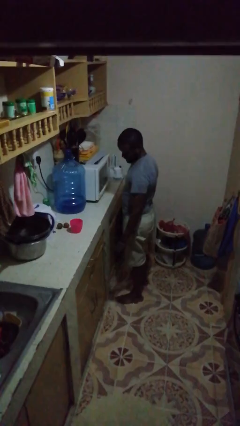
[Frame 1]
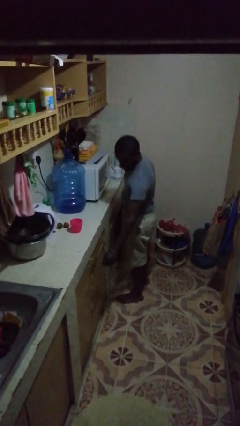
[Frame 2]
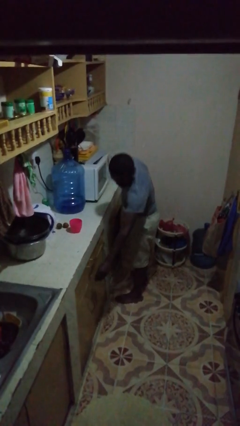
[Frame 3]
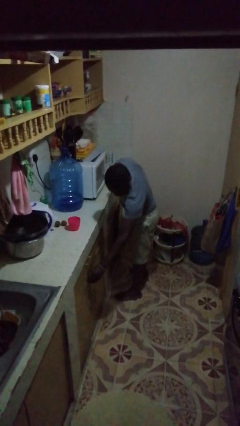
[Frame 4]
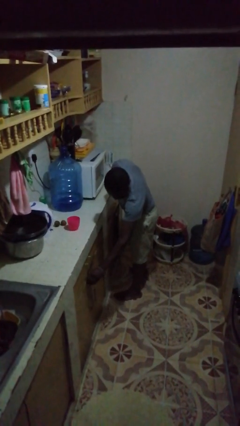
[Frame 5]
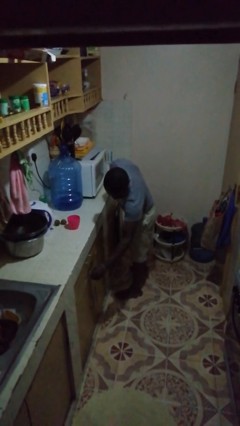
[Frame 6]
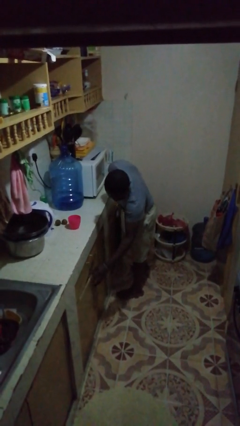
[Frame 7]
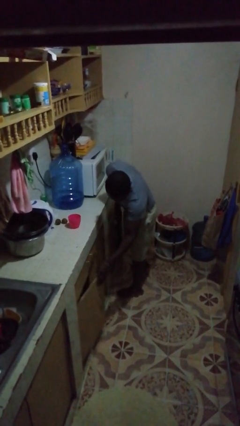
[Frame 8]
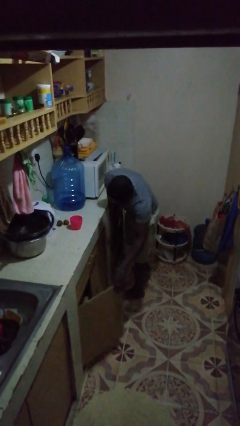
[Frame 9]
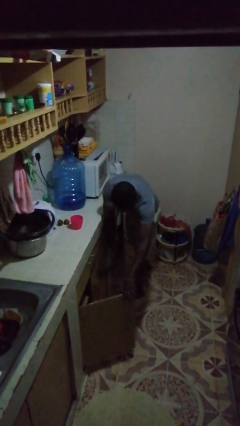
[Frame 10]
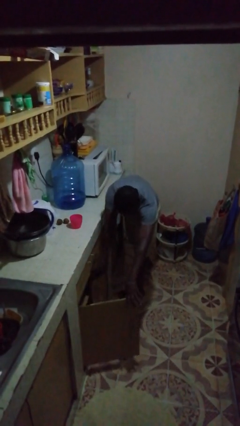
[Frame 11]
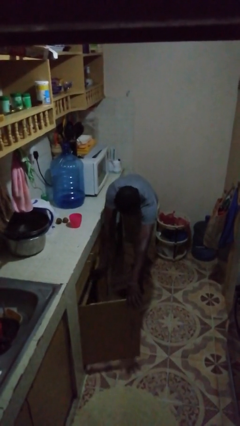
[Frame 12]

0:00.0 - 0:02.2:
person opens cabinet

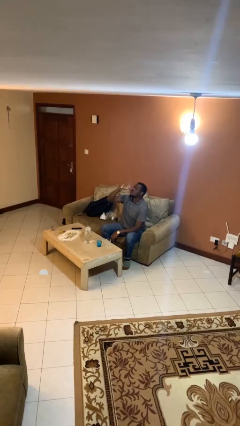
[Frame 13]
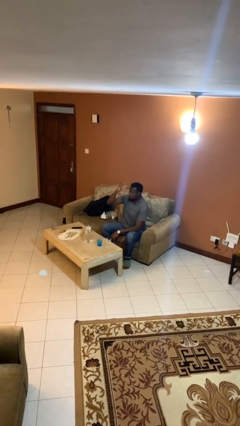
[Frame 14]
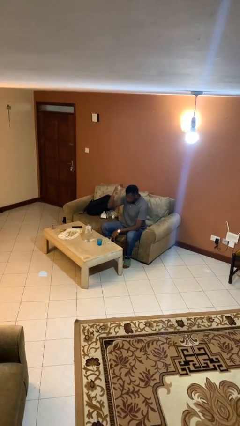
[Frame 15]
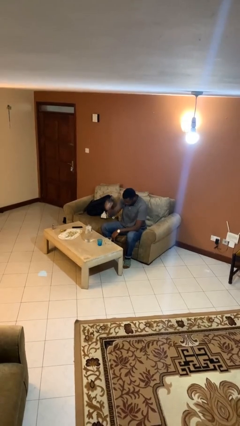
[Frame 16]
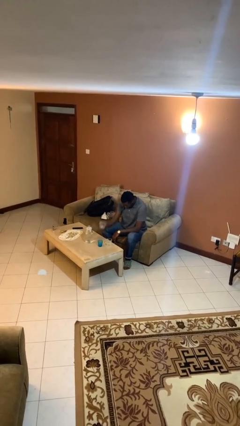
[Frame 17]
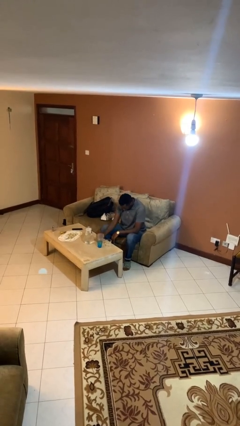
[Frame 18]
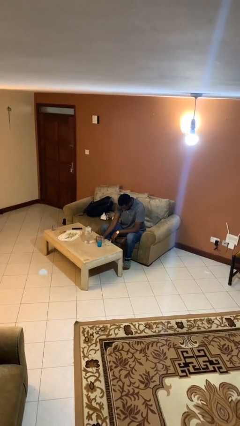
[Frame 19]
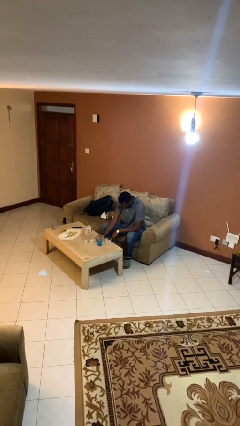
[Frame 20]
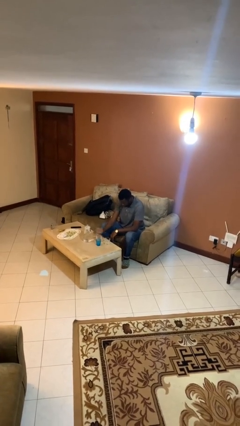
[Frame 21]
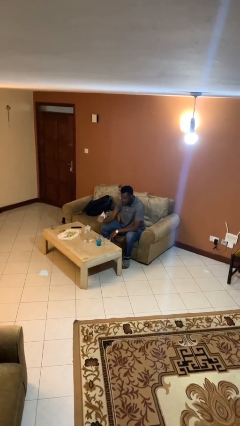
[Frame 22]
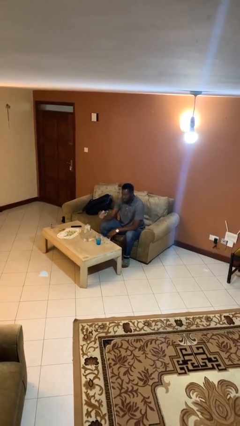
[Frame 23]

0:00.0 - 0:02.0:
person puts down object on table

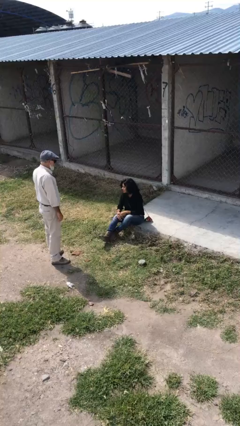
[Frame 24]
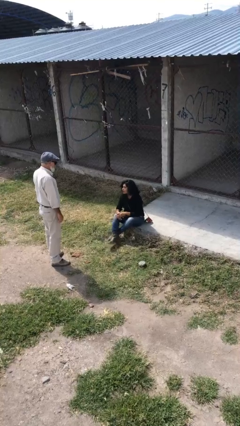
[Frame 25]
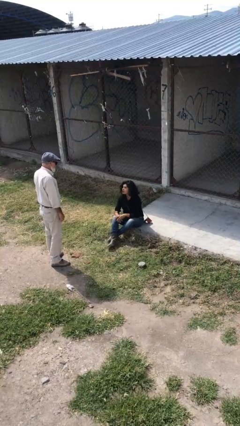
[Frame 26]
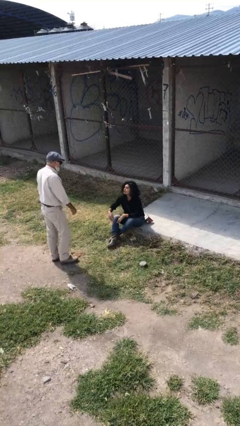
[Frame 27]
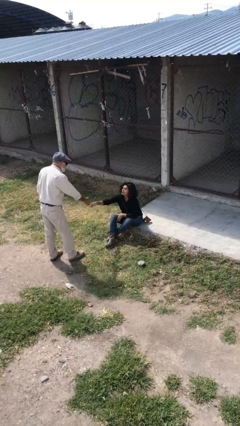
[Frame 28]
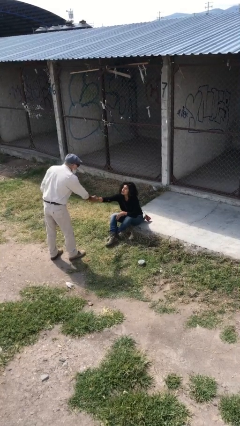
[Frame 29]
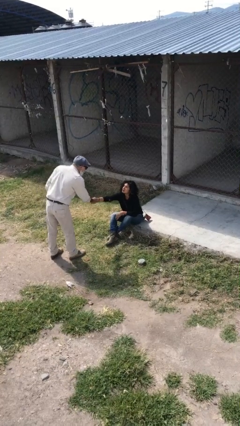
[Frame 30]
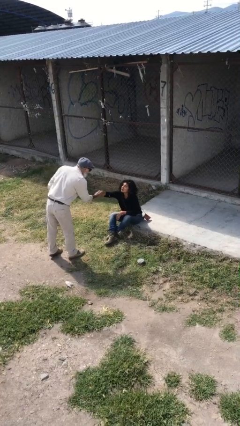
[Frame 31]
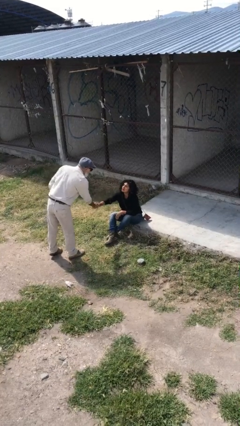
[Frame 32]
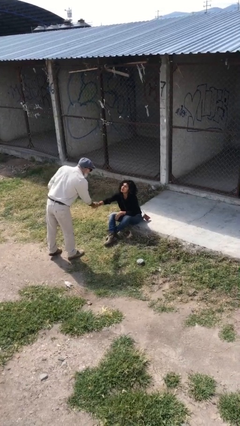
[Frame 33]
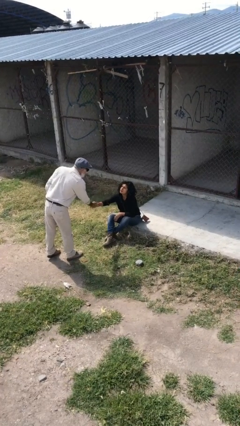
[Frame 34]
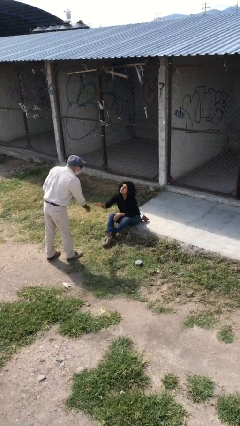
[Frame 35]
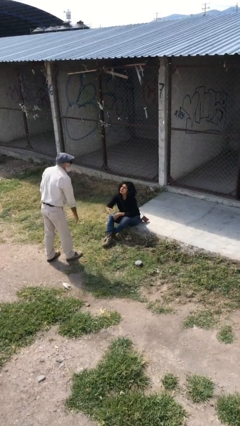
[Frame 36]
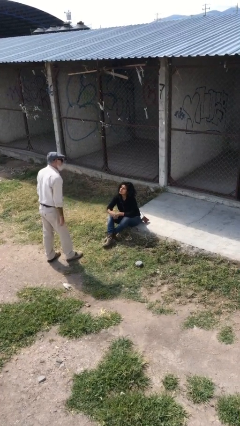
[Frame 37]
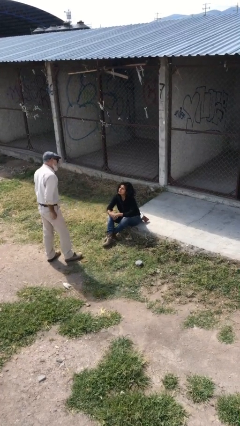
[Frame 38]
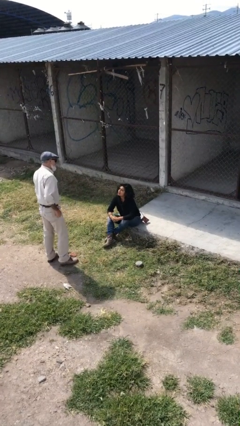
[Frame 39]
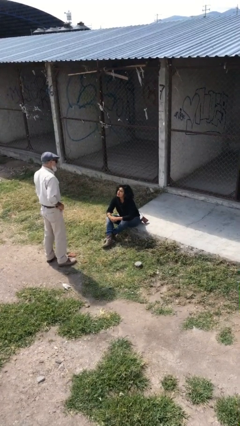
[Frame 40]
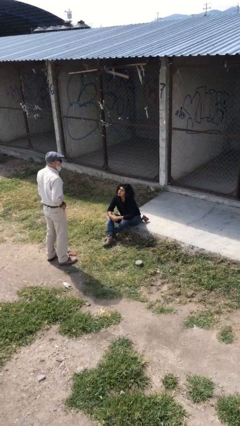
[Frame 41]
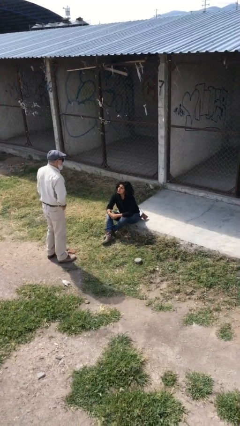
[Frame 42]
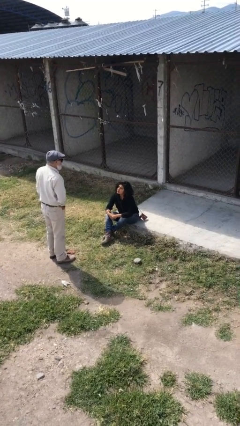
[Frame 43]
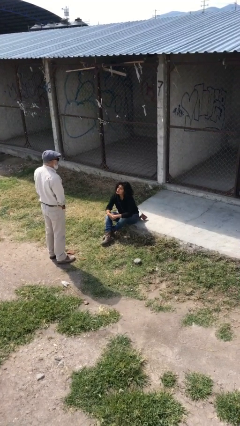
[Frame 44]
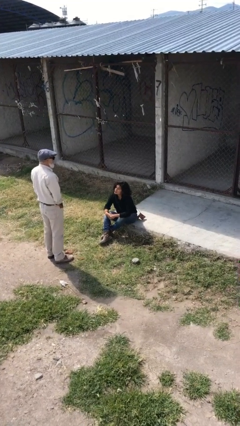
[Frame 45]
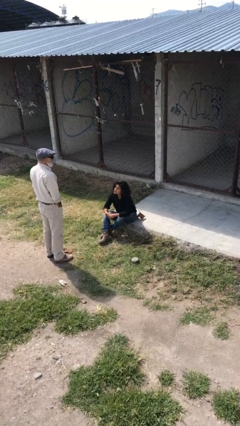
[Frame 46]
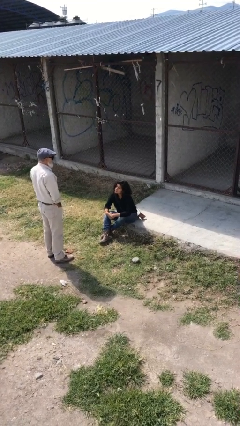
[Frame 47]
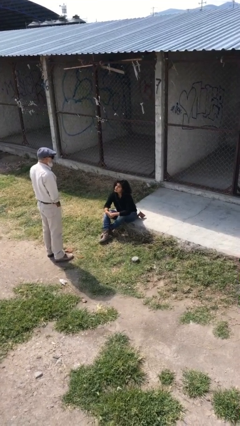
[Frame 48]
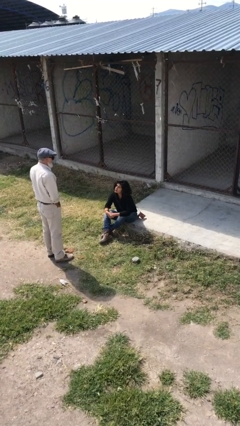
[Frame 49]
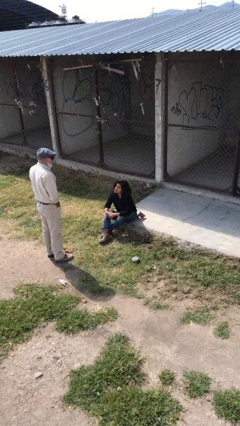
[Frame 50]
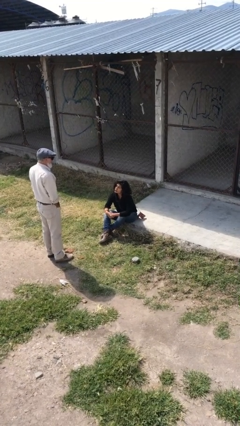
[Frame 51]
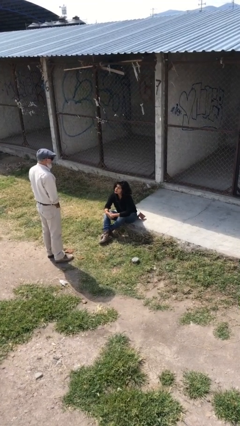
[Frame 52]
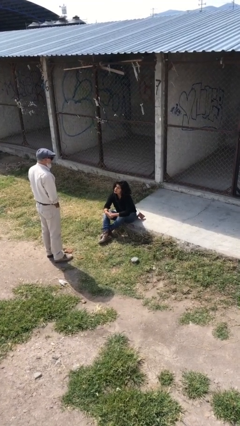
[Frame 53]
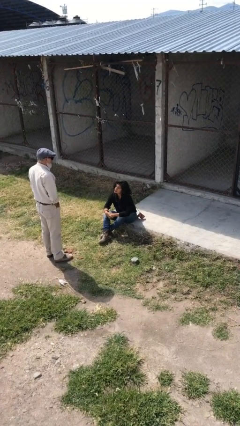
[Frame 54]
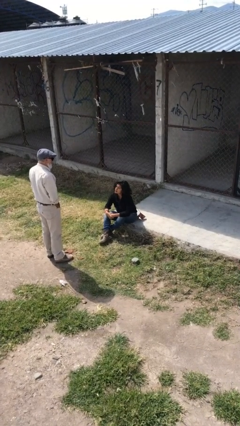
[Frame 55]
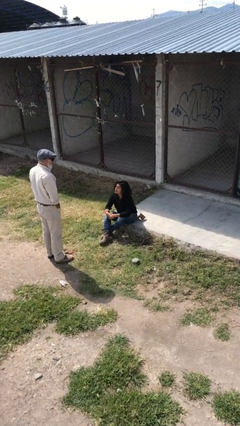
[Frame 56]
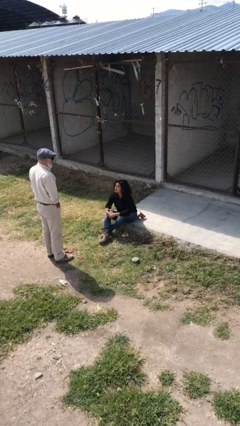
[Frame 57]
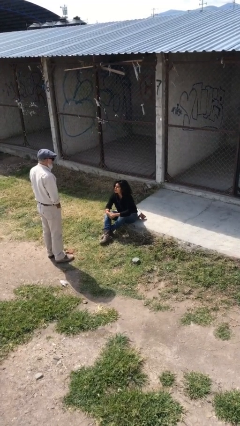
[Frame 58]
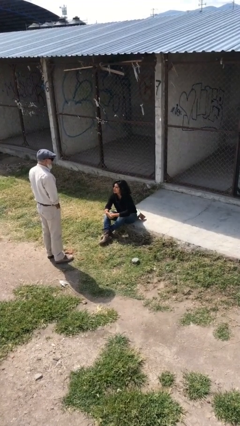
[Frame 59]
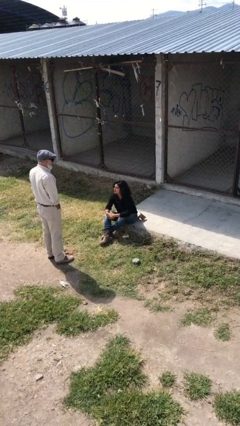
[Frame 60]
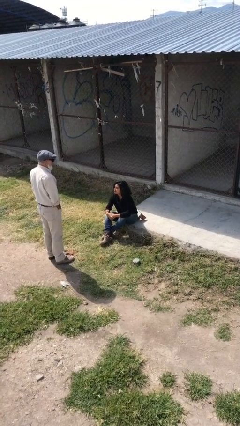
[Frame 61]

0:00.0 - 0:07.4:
person shakes hand

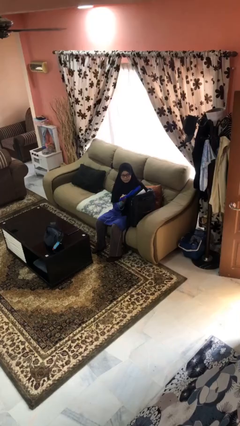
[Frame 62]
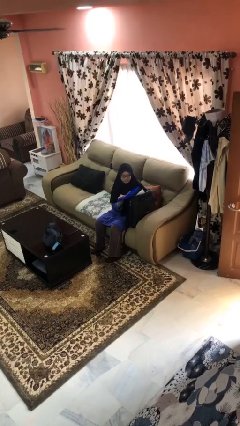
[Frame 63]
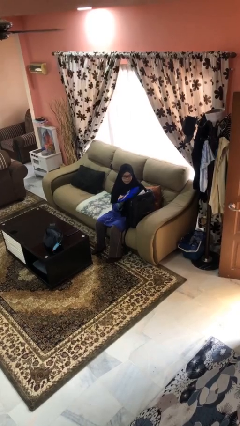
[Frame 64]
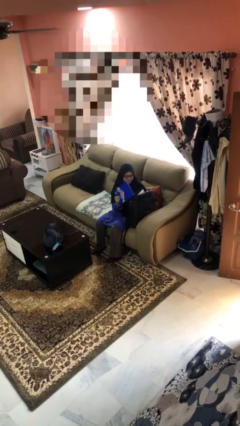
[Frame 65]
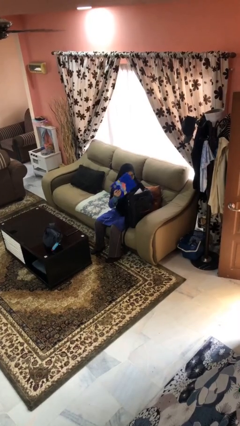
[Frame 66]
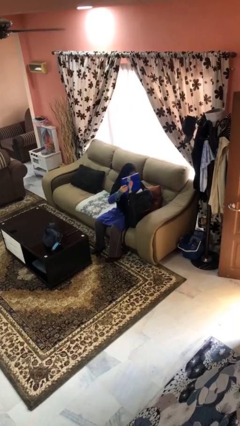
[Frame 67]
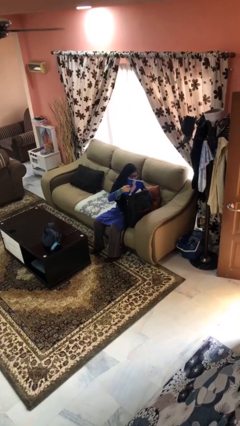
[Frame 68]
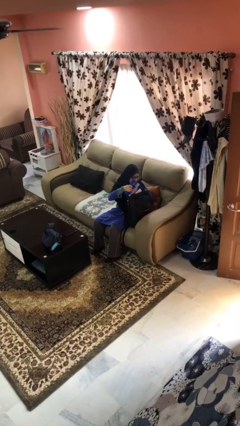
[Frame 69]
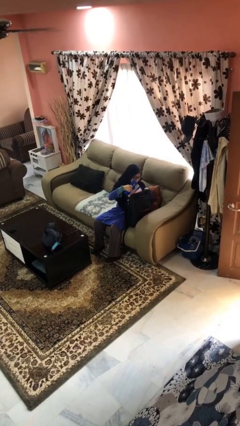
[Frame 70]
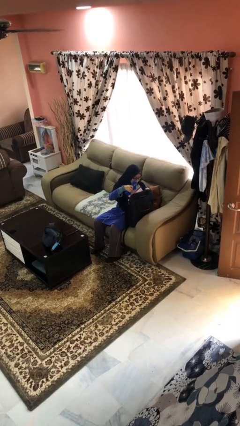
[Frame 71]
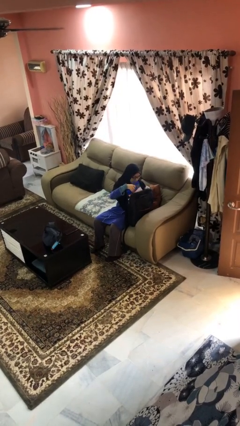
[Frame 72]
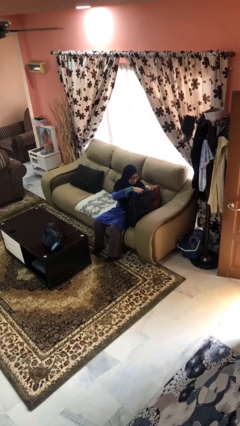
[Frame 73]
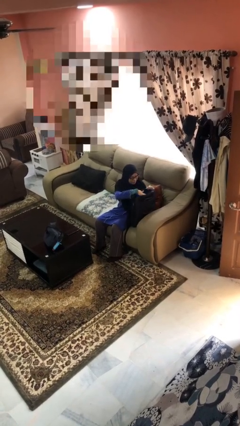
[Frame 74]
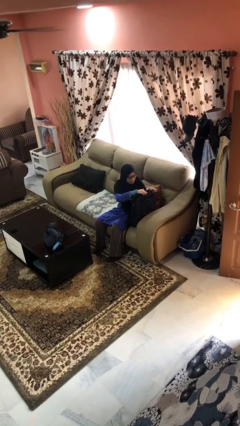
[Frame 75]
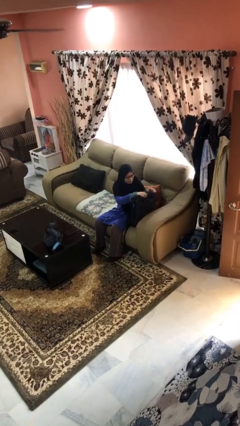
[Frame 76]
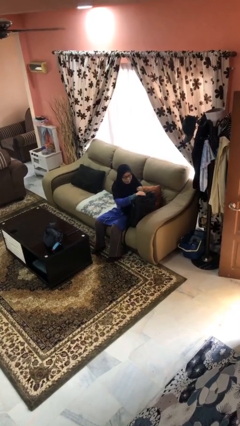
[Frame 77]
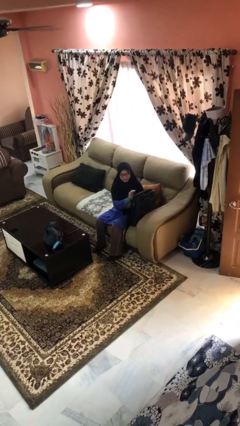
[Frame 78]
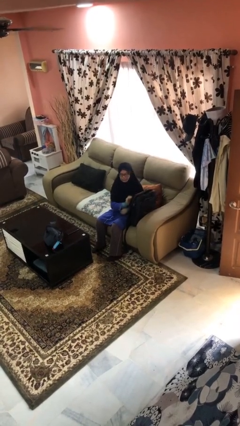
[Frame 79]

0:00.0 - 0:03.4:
person puts object into backpack

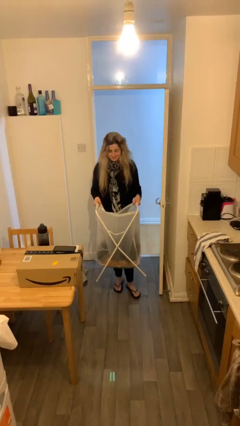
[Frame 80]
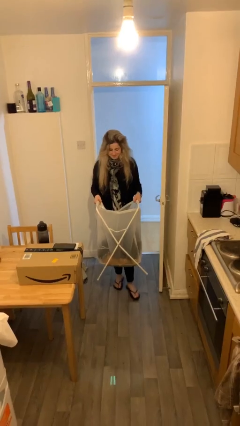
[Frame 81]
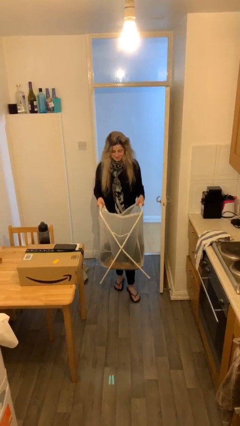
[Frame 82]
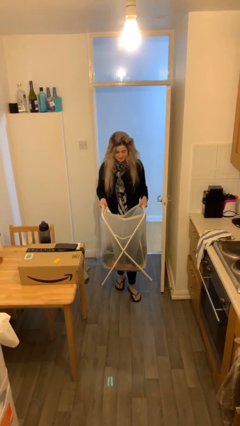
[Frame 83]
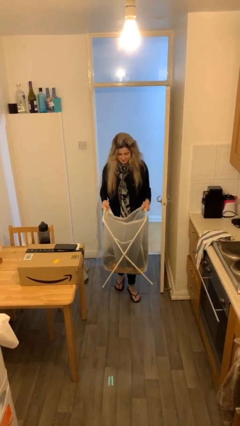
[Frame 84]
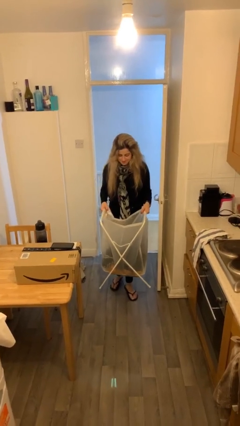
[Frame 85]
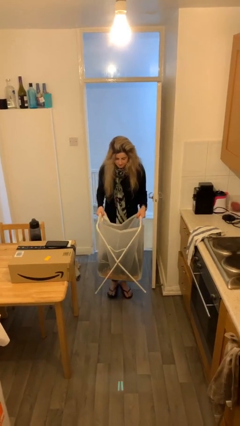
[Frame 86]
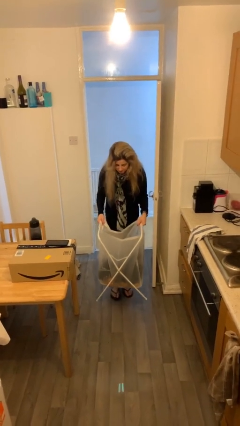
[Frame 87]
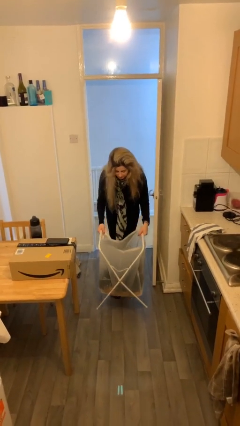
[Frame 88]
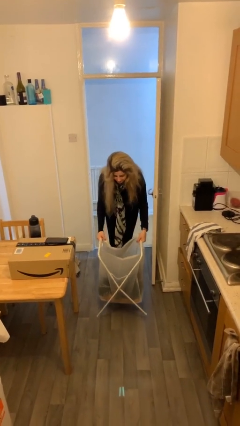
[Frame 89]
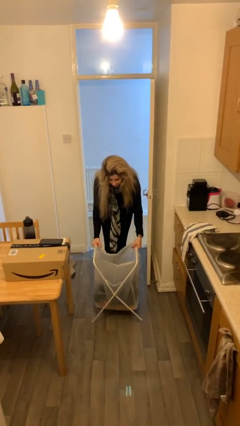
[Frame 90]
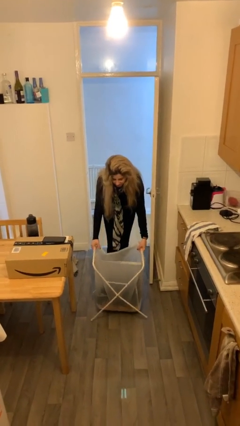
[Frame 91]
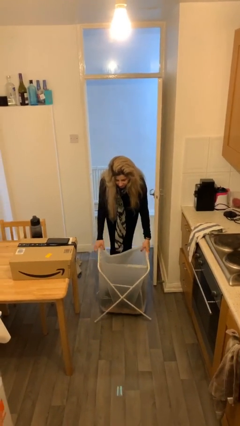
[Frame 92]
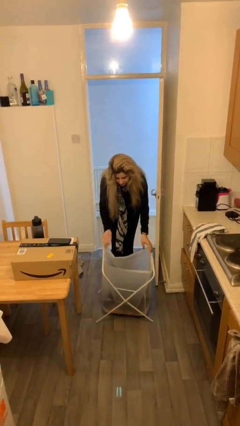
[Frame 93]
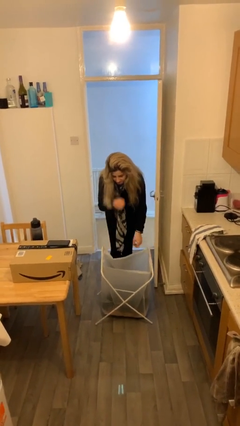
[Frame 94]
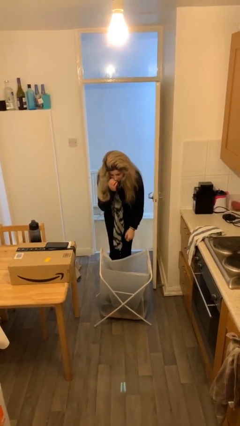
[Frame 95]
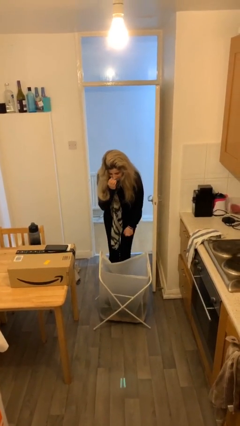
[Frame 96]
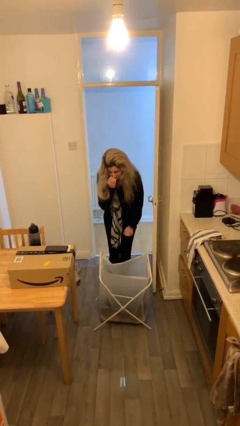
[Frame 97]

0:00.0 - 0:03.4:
person puts down object on floor
